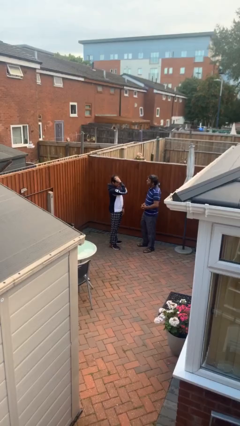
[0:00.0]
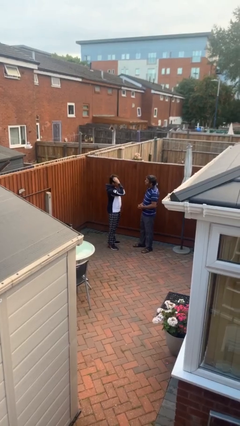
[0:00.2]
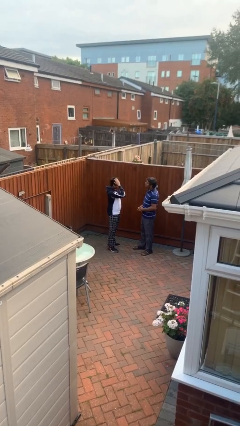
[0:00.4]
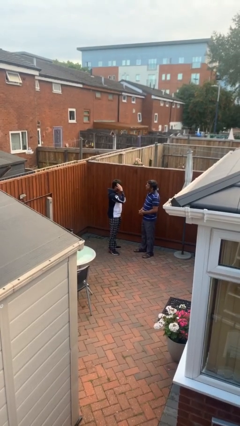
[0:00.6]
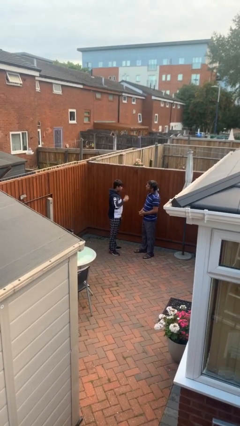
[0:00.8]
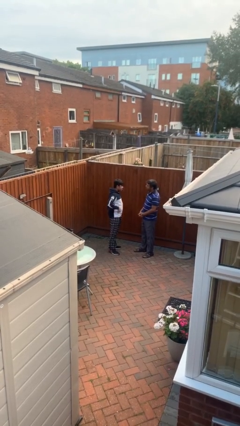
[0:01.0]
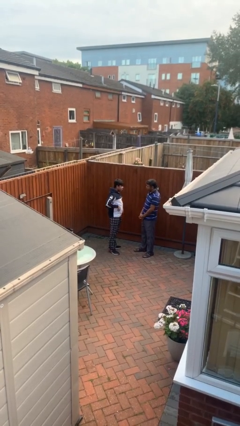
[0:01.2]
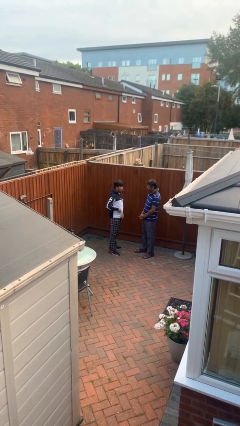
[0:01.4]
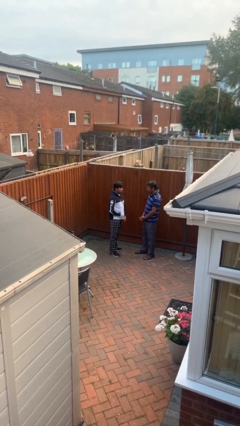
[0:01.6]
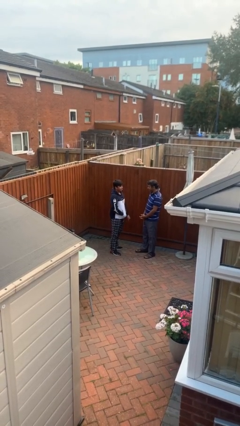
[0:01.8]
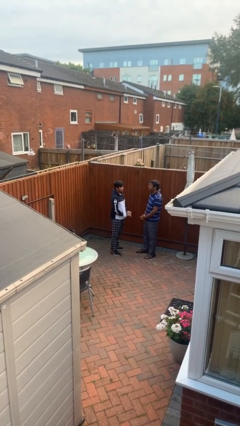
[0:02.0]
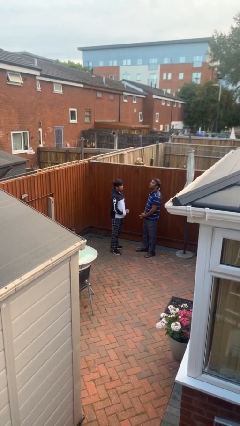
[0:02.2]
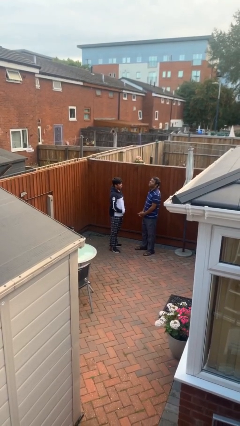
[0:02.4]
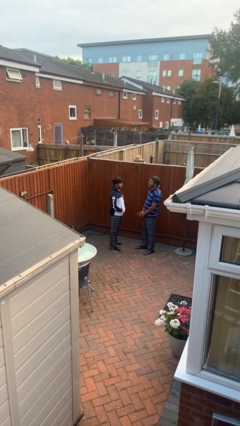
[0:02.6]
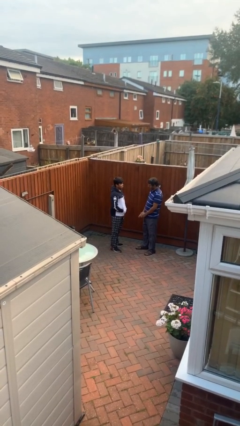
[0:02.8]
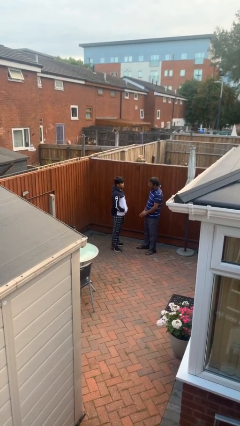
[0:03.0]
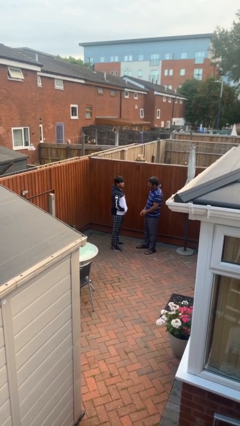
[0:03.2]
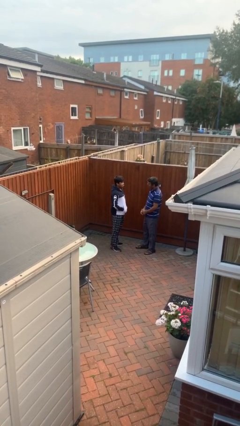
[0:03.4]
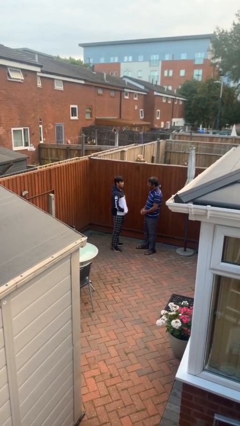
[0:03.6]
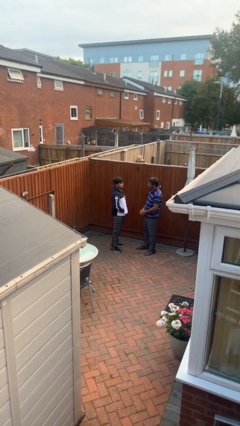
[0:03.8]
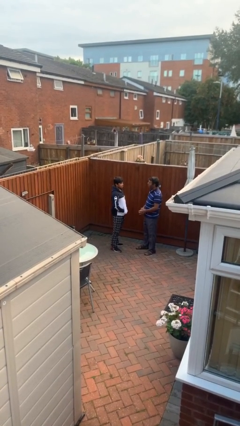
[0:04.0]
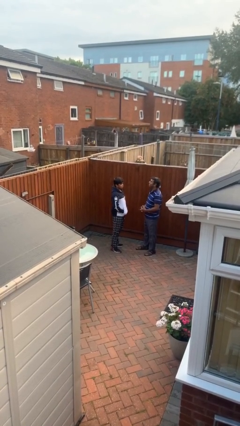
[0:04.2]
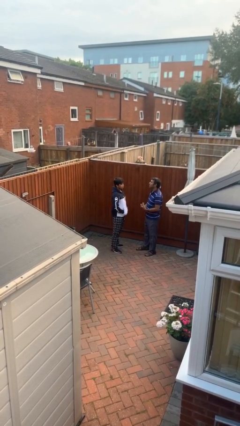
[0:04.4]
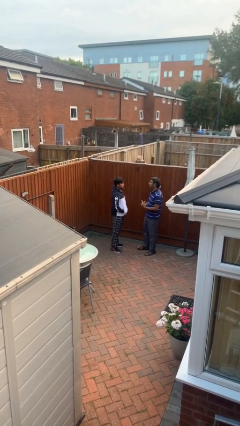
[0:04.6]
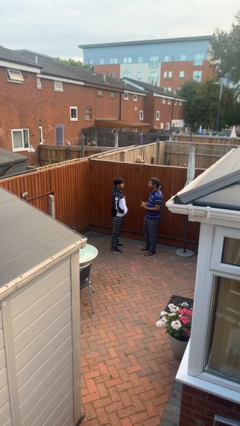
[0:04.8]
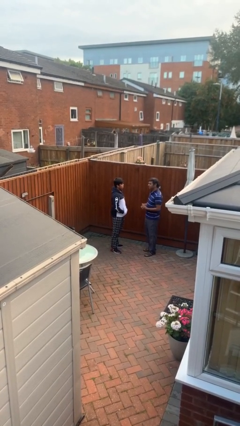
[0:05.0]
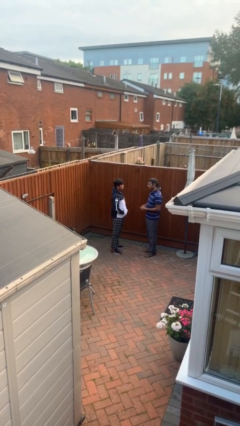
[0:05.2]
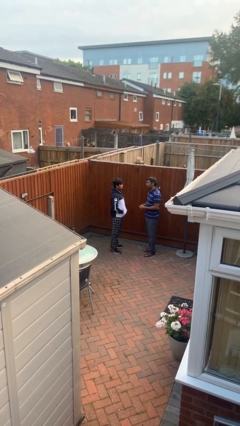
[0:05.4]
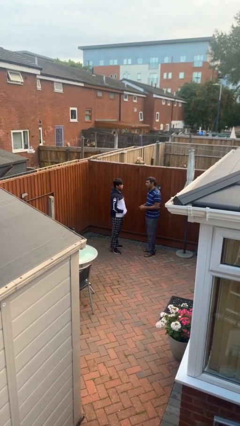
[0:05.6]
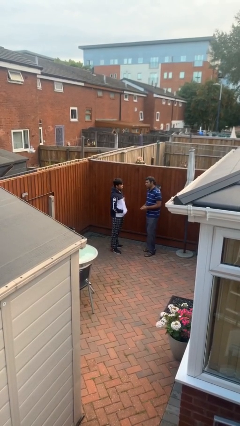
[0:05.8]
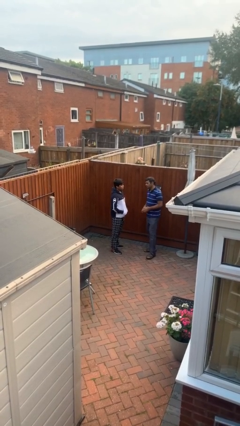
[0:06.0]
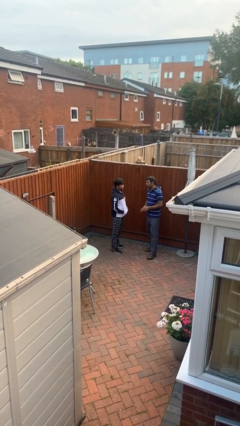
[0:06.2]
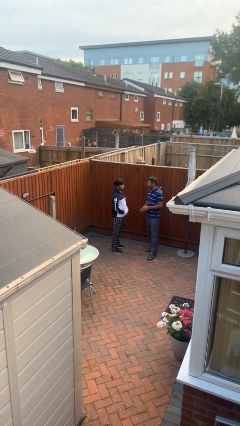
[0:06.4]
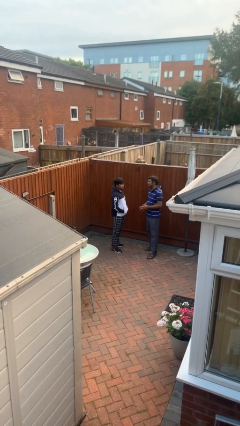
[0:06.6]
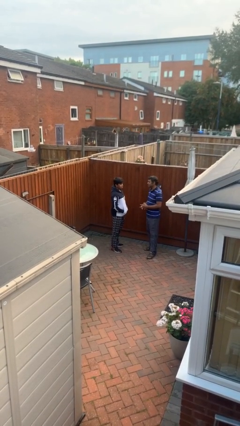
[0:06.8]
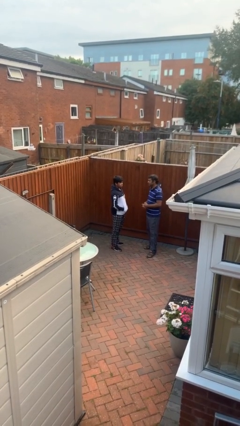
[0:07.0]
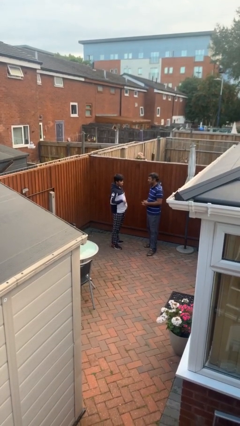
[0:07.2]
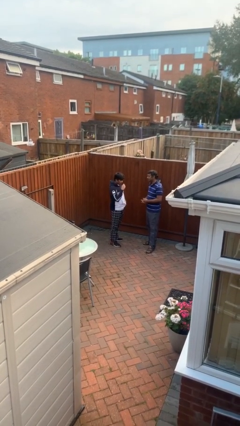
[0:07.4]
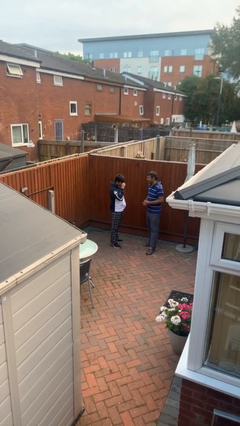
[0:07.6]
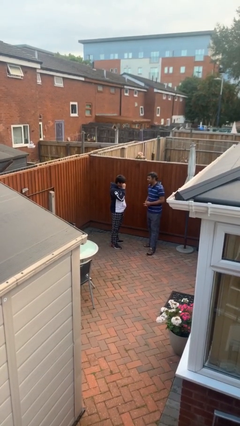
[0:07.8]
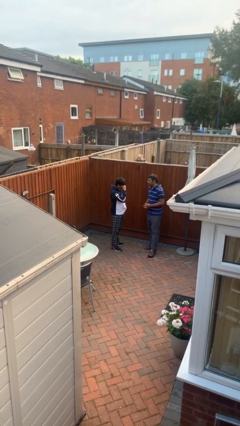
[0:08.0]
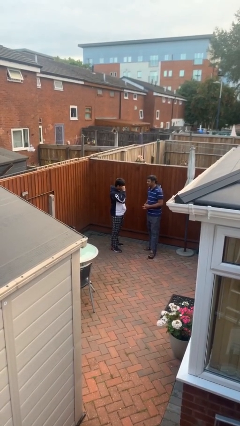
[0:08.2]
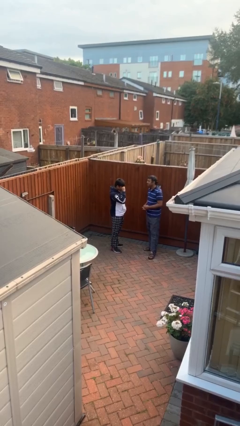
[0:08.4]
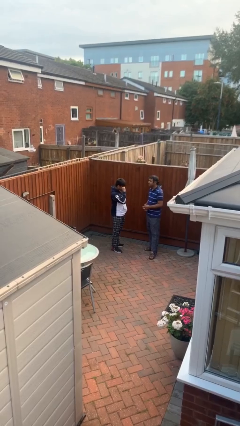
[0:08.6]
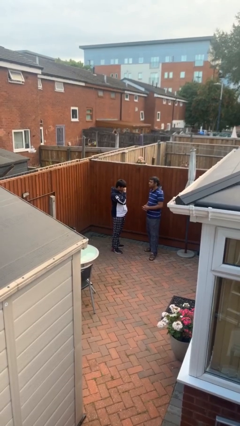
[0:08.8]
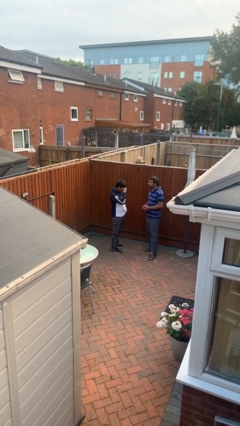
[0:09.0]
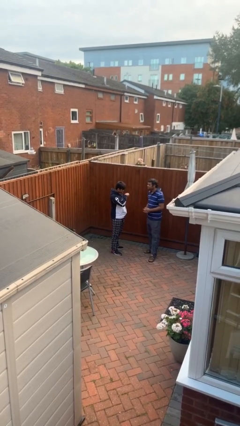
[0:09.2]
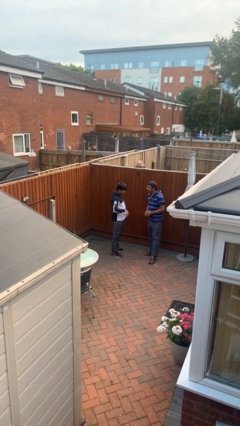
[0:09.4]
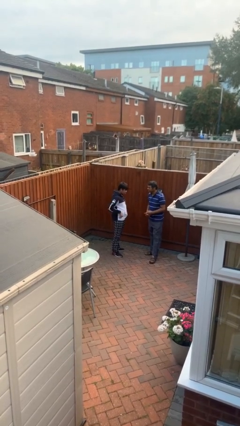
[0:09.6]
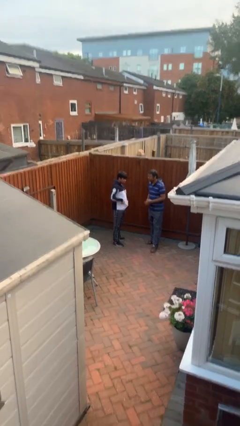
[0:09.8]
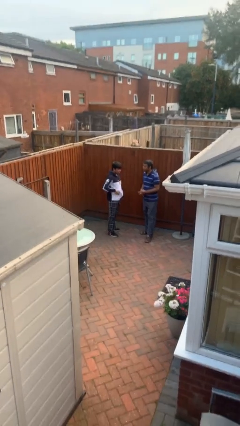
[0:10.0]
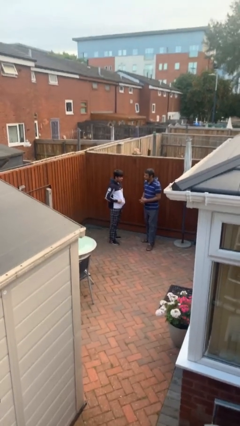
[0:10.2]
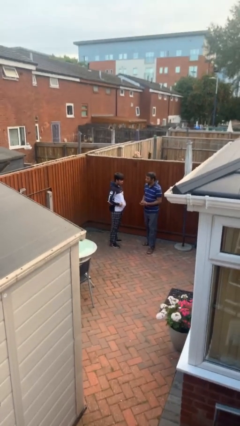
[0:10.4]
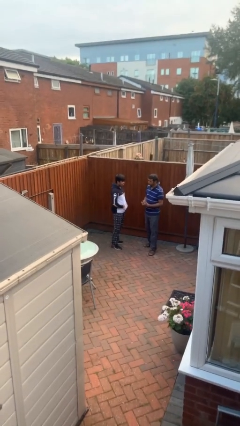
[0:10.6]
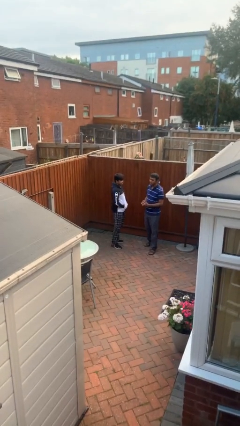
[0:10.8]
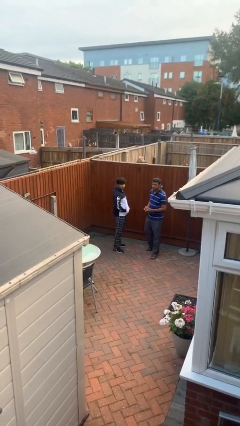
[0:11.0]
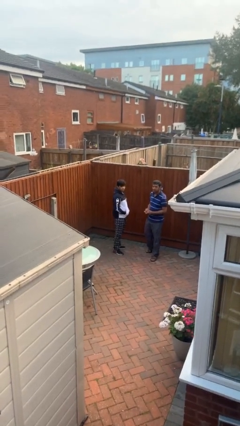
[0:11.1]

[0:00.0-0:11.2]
person talks to person

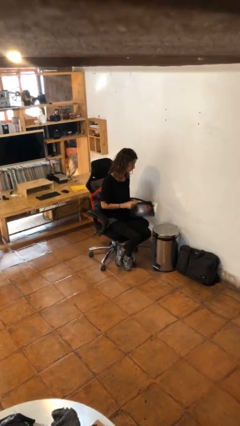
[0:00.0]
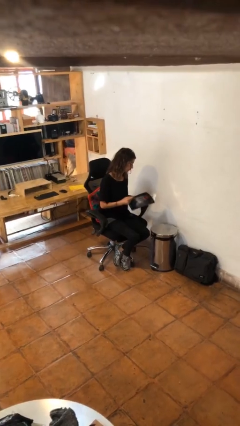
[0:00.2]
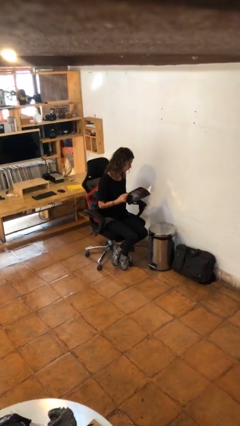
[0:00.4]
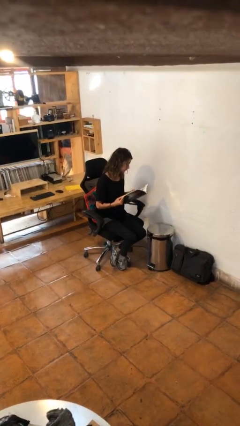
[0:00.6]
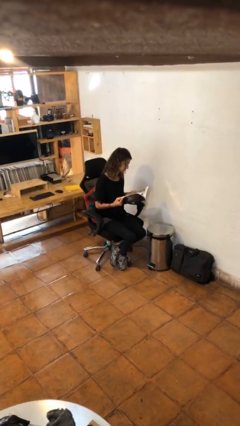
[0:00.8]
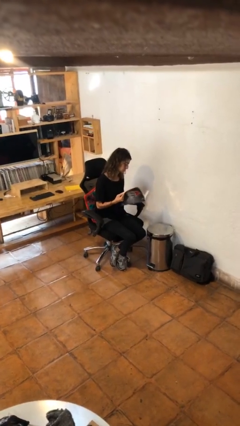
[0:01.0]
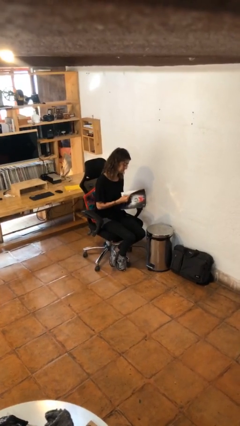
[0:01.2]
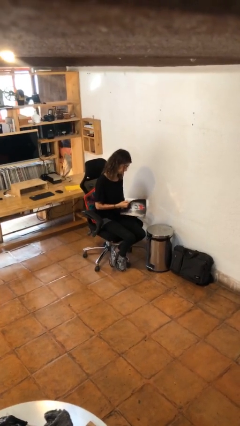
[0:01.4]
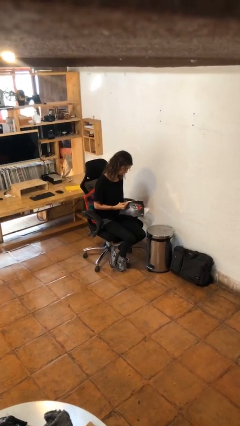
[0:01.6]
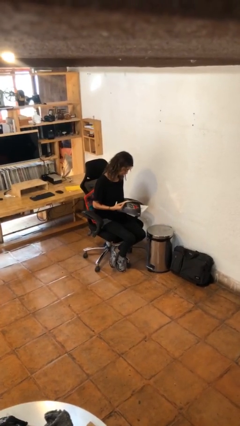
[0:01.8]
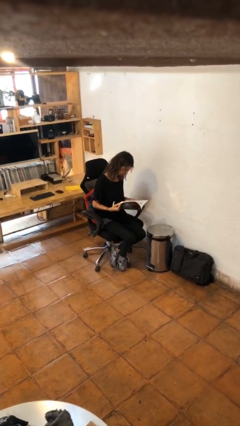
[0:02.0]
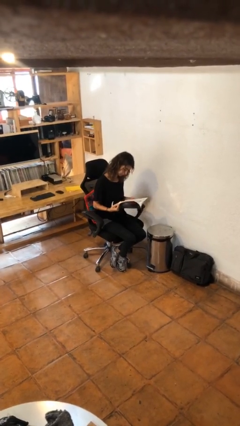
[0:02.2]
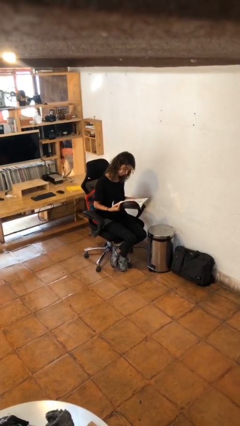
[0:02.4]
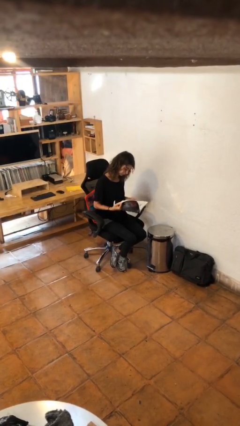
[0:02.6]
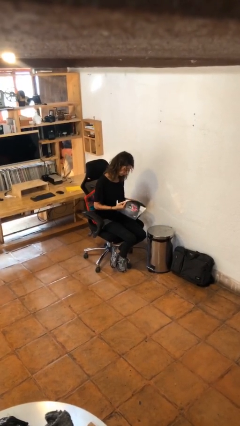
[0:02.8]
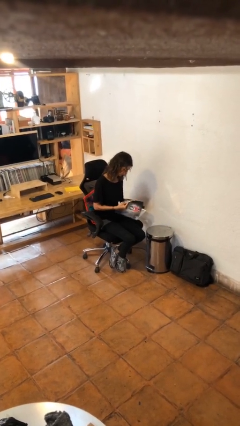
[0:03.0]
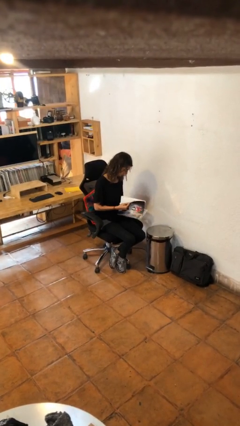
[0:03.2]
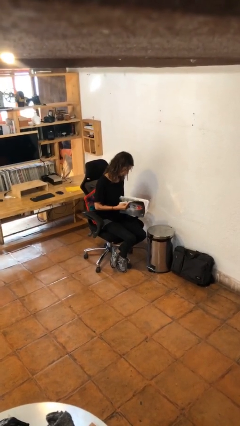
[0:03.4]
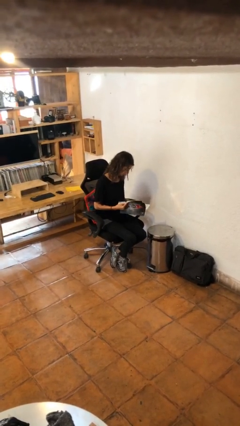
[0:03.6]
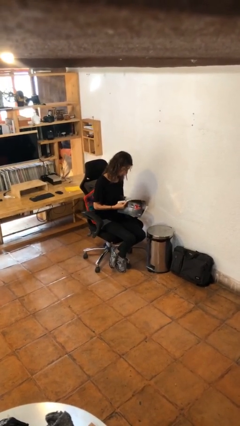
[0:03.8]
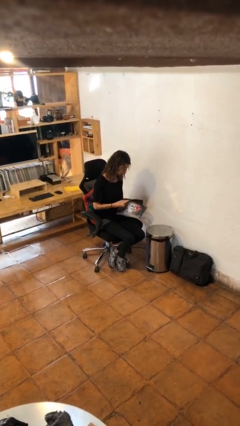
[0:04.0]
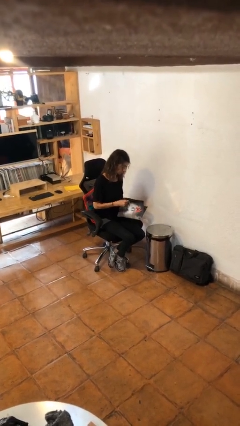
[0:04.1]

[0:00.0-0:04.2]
person reads magazine

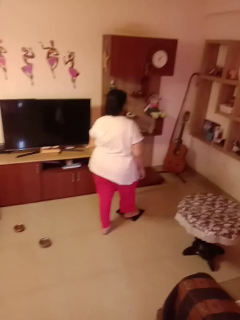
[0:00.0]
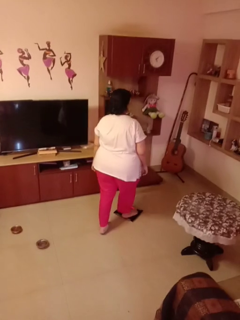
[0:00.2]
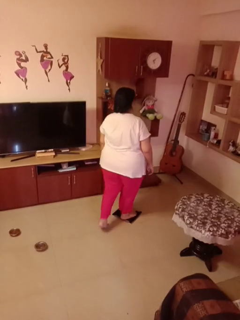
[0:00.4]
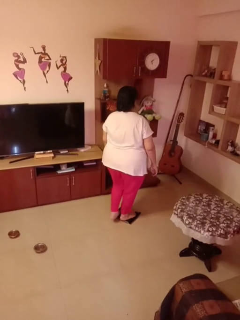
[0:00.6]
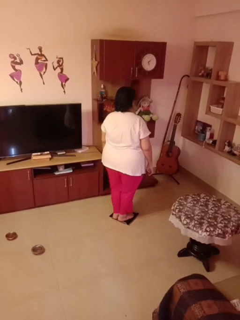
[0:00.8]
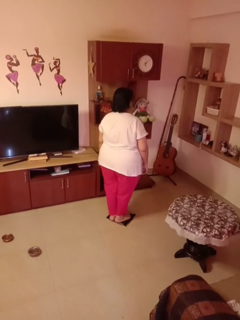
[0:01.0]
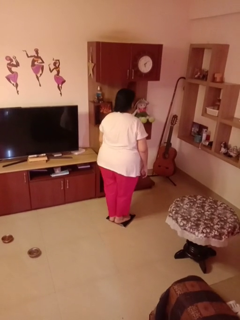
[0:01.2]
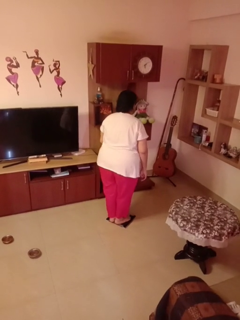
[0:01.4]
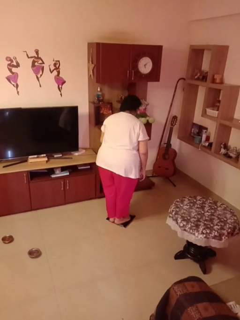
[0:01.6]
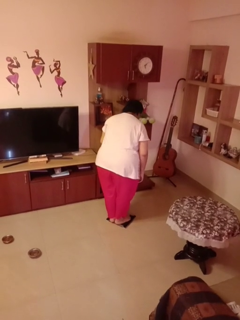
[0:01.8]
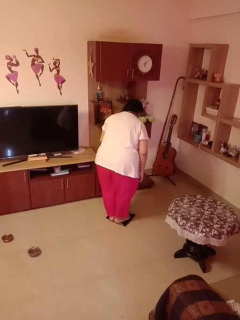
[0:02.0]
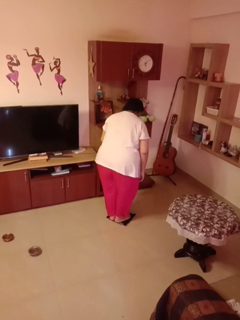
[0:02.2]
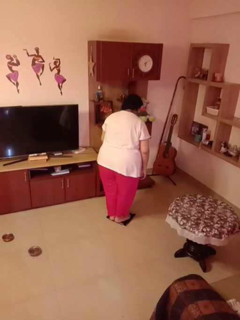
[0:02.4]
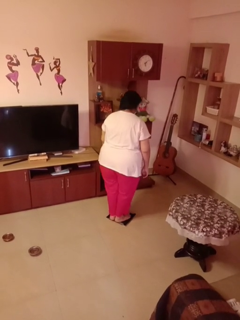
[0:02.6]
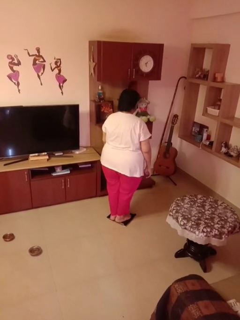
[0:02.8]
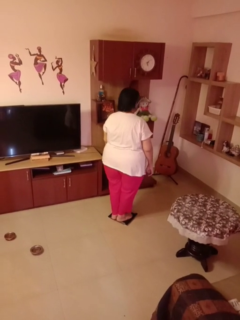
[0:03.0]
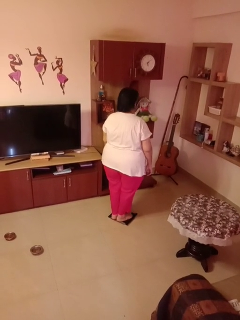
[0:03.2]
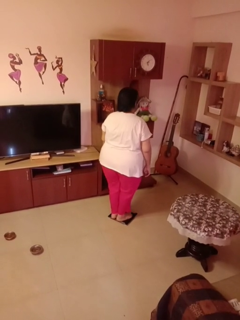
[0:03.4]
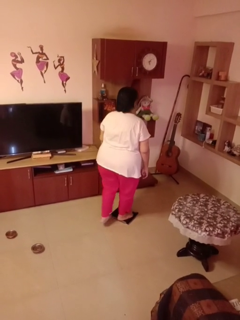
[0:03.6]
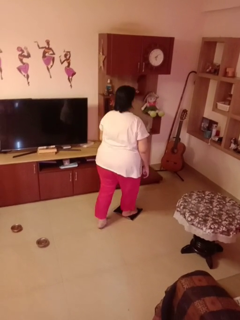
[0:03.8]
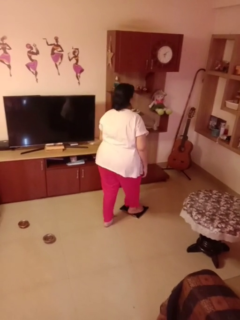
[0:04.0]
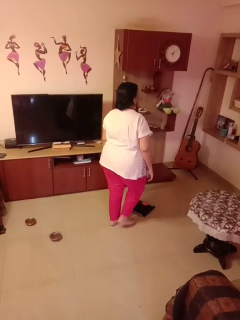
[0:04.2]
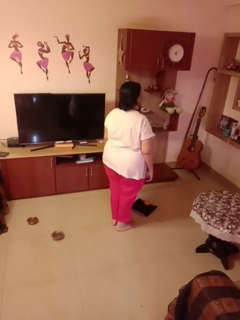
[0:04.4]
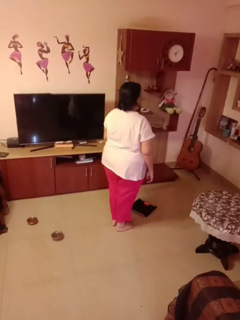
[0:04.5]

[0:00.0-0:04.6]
person uses bodyweight scale
